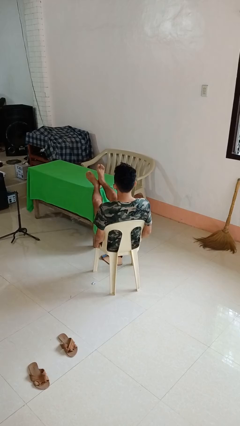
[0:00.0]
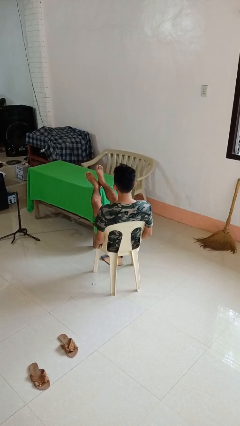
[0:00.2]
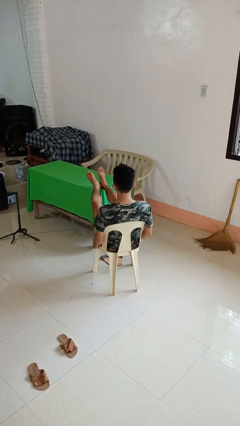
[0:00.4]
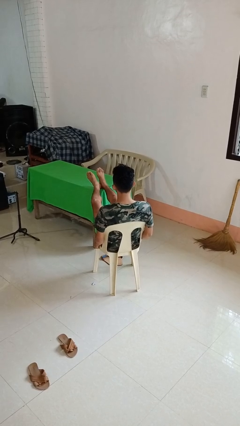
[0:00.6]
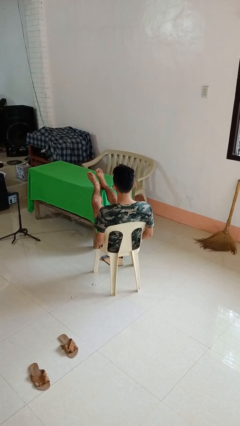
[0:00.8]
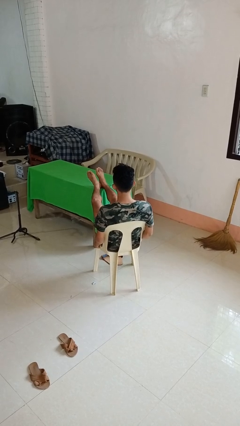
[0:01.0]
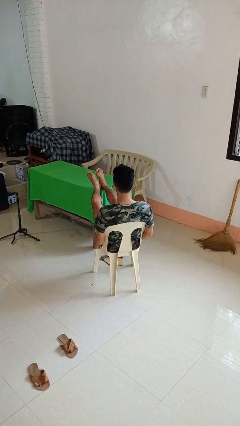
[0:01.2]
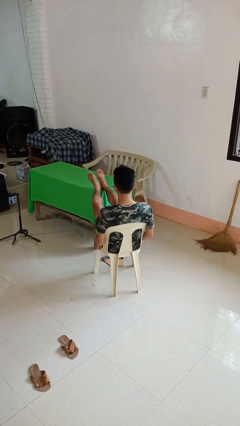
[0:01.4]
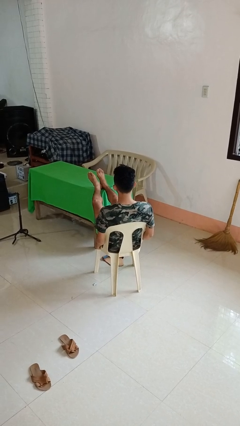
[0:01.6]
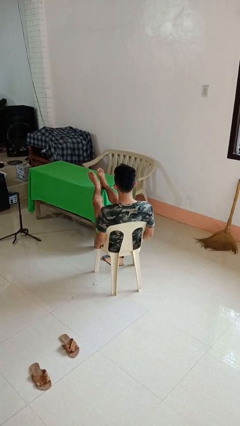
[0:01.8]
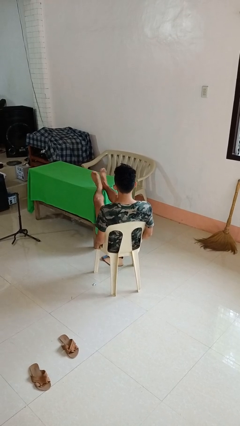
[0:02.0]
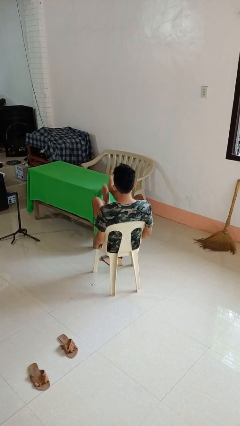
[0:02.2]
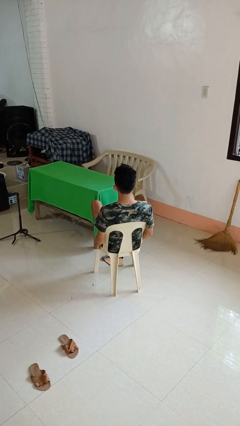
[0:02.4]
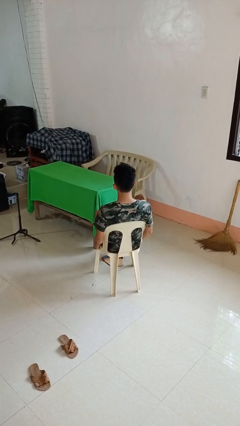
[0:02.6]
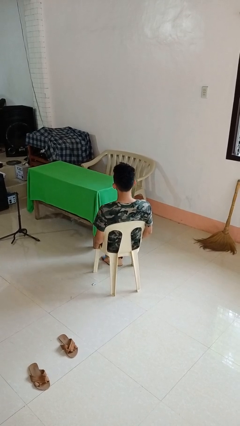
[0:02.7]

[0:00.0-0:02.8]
person puts feet up

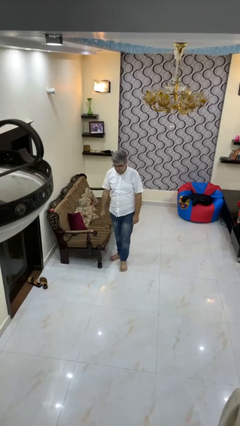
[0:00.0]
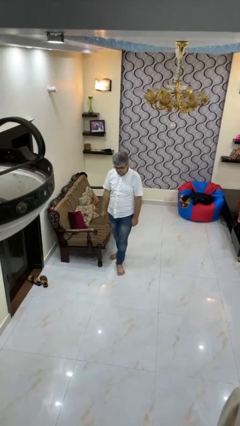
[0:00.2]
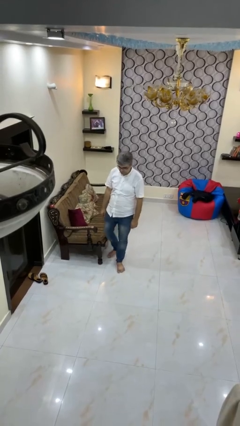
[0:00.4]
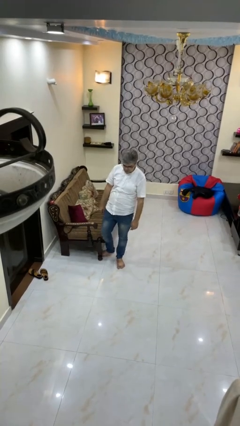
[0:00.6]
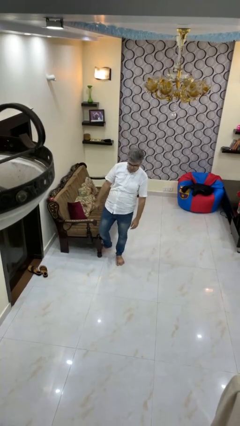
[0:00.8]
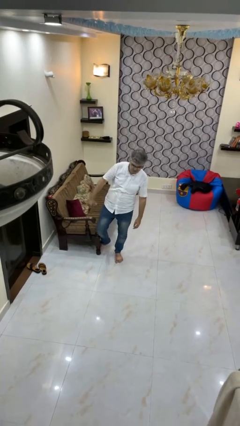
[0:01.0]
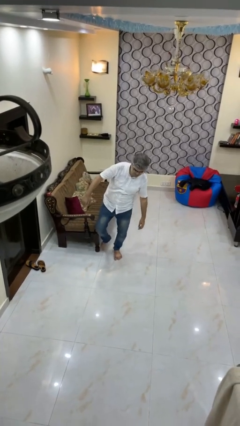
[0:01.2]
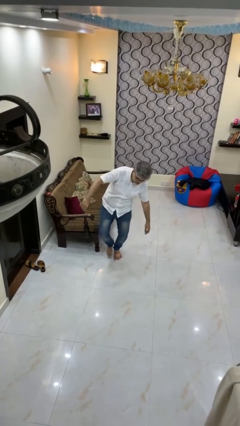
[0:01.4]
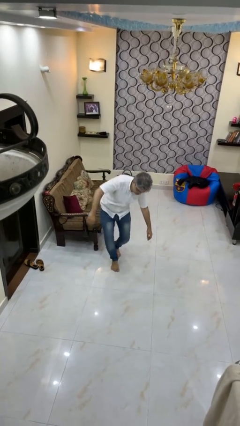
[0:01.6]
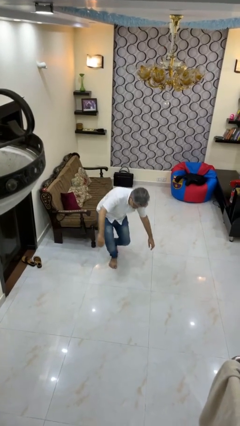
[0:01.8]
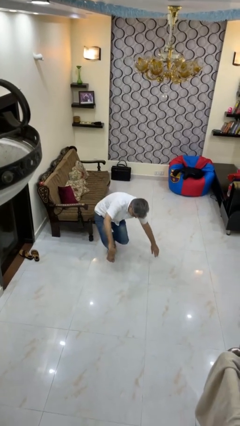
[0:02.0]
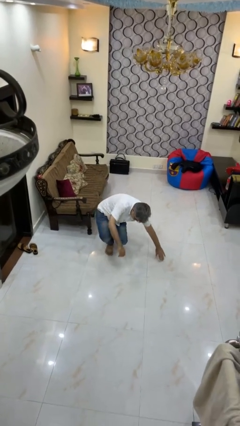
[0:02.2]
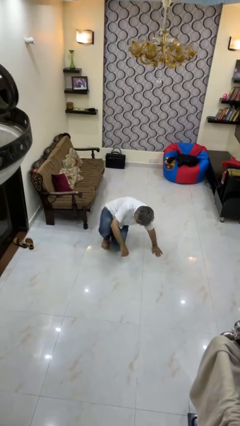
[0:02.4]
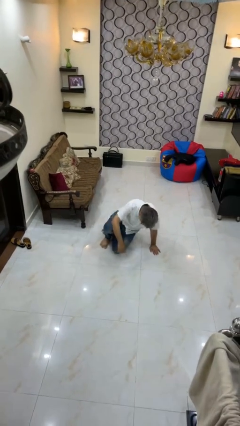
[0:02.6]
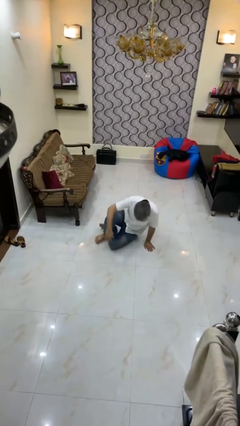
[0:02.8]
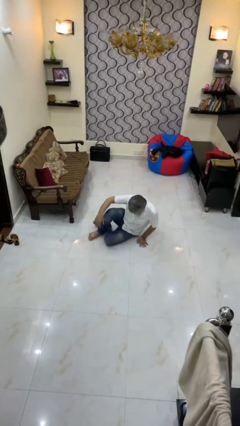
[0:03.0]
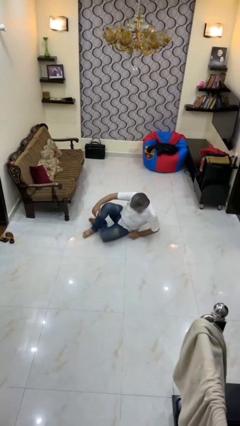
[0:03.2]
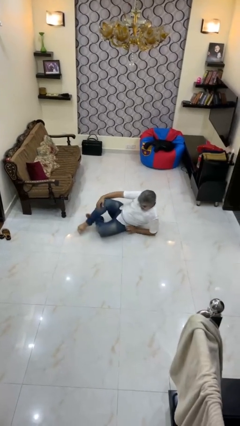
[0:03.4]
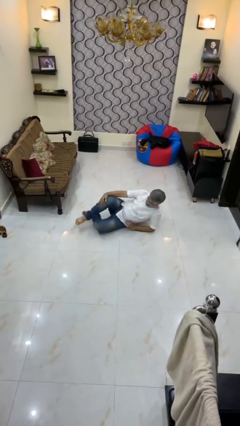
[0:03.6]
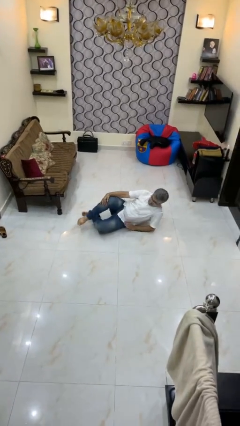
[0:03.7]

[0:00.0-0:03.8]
person trips on object on floor

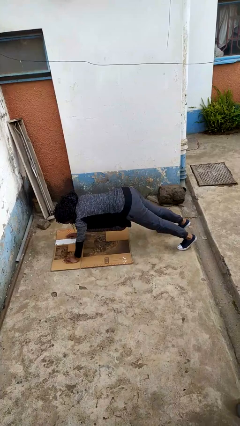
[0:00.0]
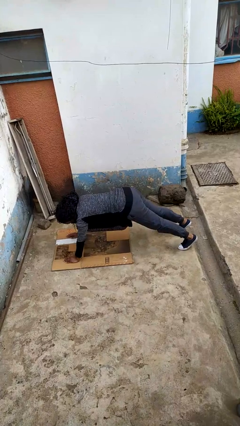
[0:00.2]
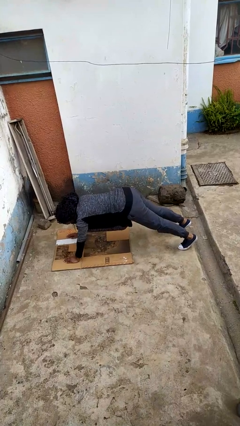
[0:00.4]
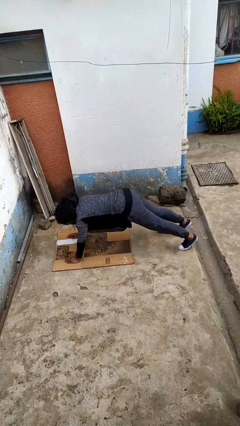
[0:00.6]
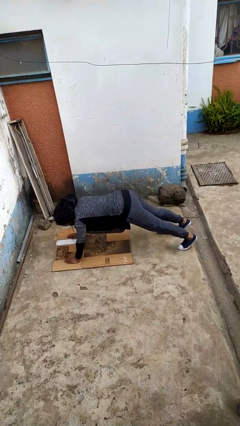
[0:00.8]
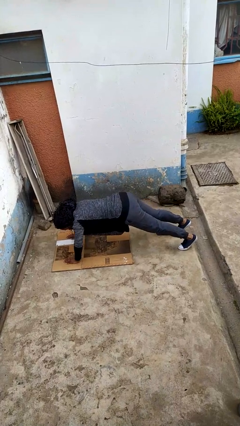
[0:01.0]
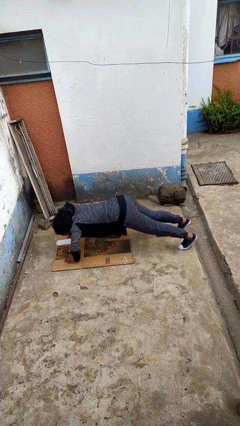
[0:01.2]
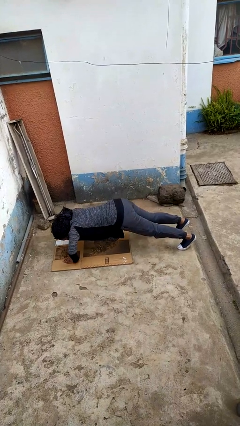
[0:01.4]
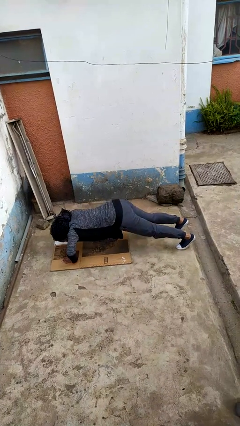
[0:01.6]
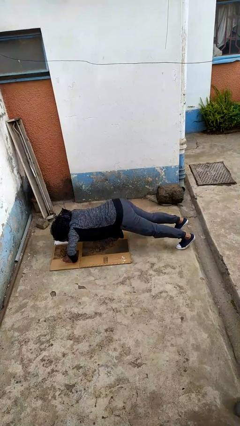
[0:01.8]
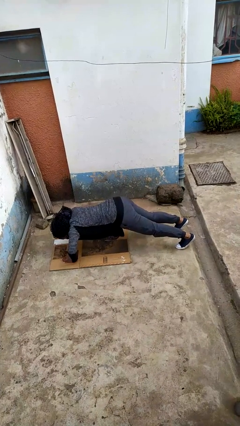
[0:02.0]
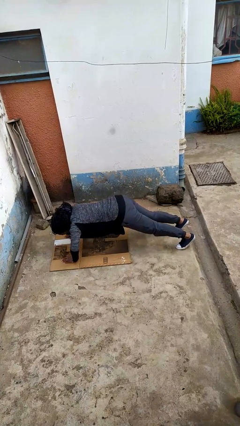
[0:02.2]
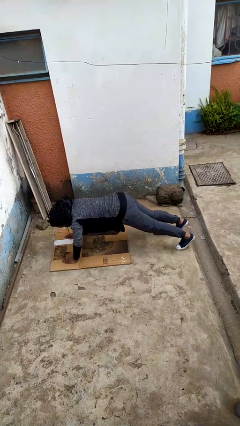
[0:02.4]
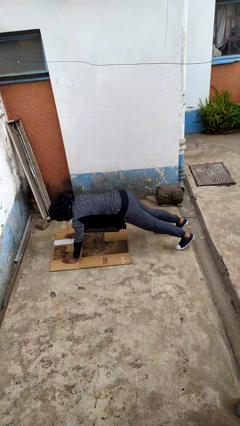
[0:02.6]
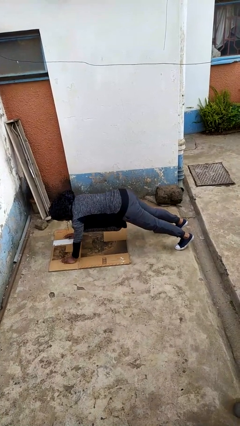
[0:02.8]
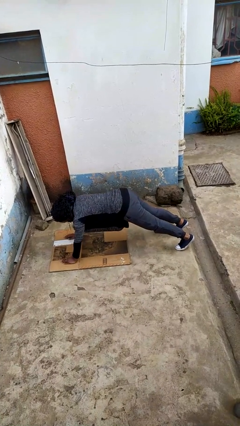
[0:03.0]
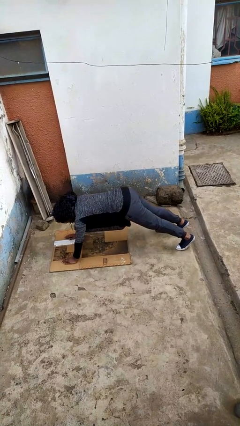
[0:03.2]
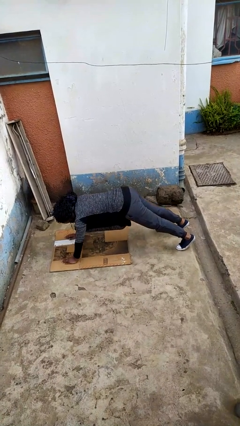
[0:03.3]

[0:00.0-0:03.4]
person exercises with pushup

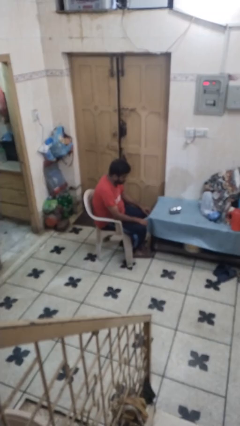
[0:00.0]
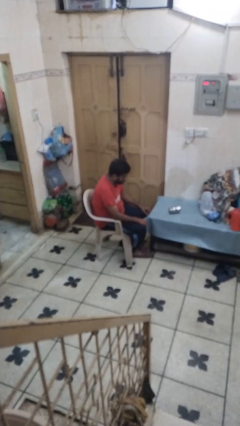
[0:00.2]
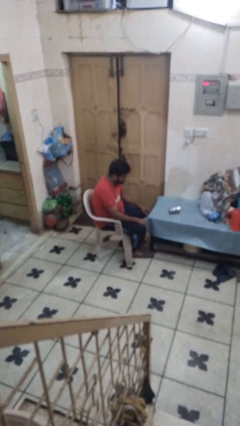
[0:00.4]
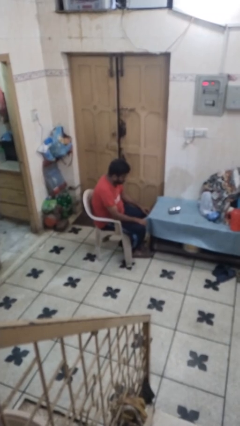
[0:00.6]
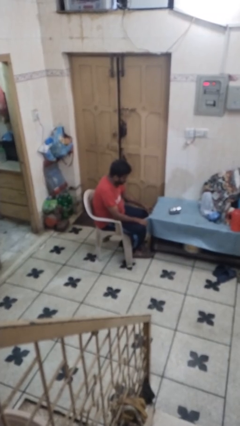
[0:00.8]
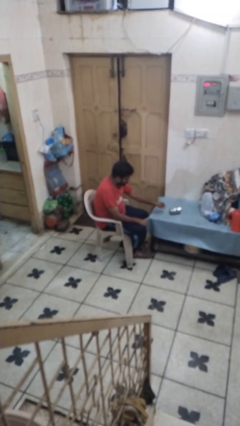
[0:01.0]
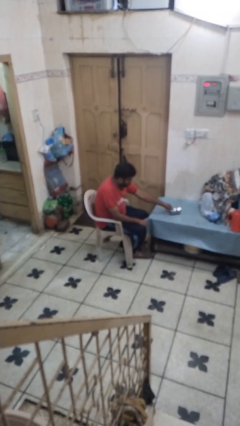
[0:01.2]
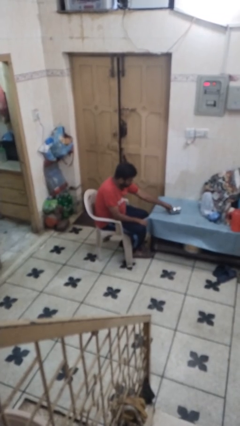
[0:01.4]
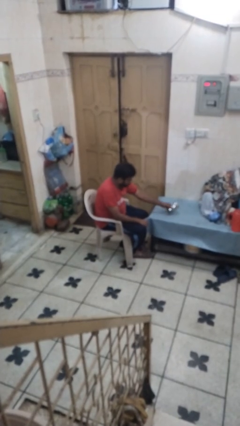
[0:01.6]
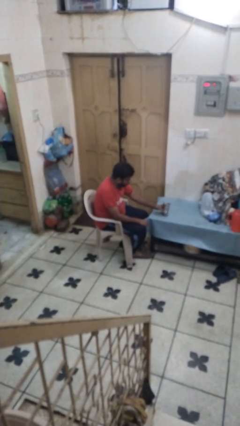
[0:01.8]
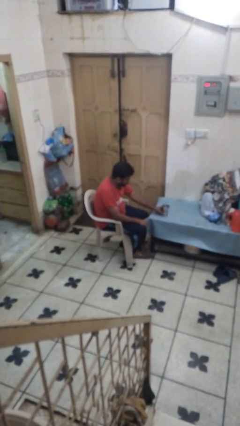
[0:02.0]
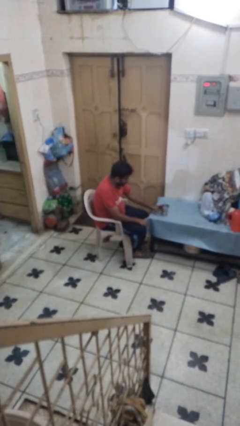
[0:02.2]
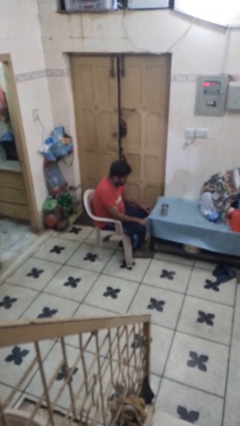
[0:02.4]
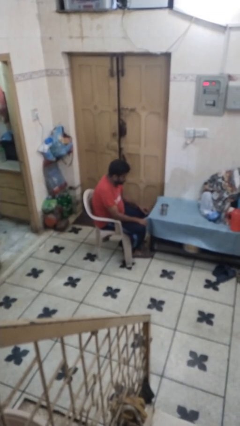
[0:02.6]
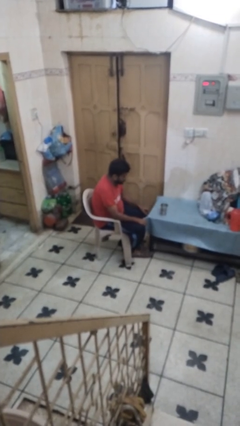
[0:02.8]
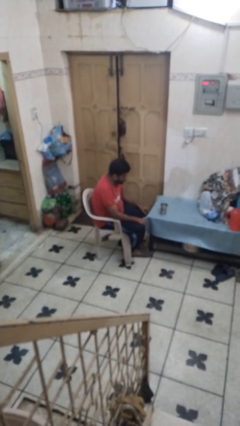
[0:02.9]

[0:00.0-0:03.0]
person sets upright glass

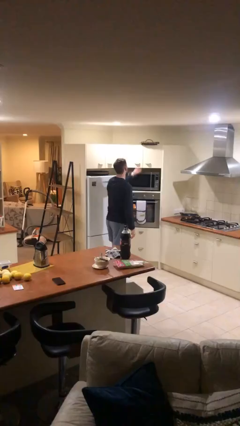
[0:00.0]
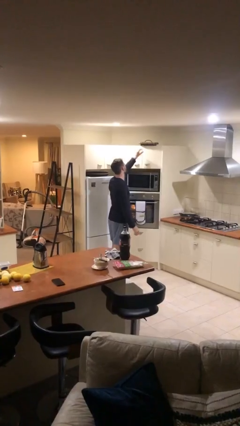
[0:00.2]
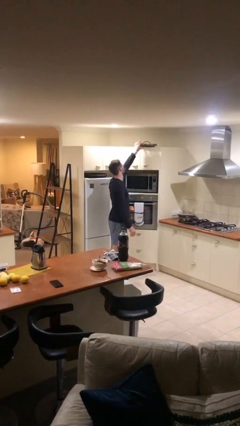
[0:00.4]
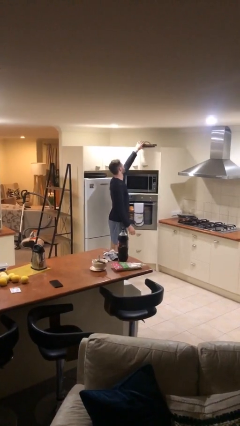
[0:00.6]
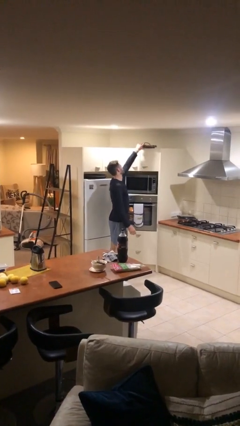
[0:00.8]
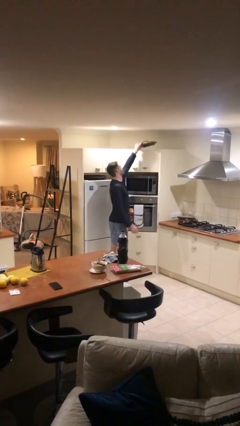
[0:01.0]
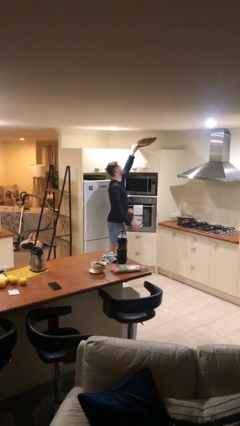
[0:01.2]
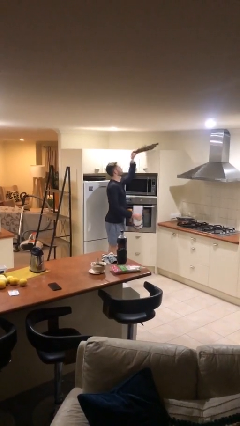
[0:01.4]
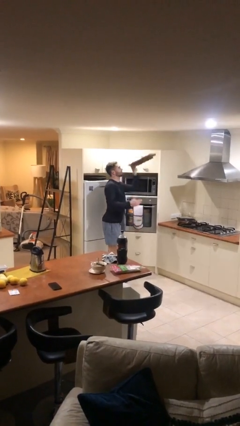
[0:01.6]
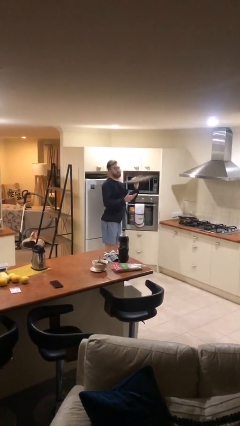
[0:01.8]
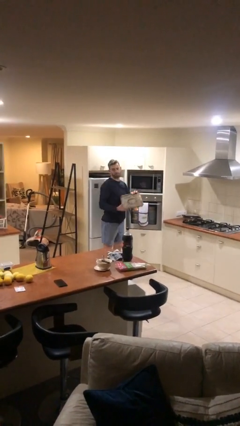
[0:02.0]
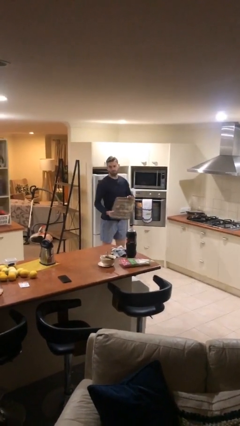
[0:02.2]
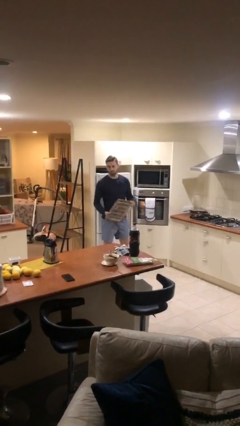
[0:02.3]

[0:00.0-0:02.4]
person picks up object from shelf

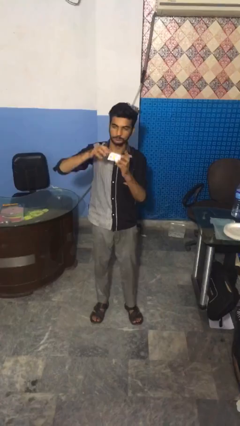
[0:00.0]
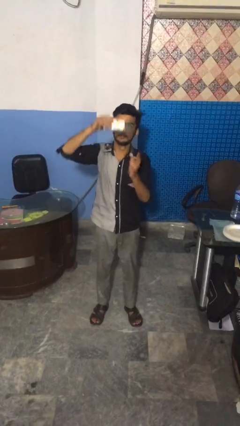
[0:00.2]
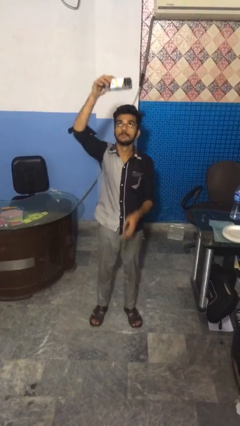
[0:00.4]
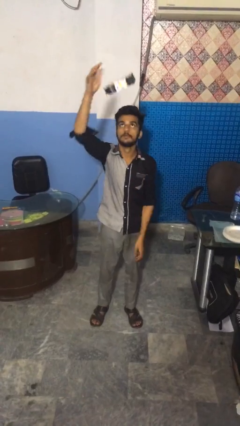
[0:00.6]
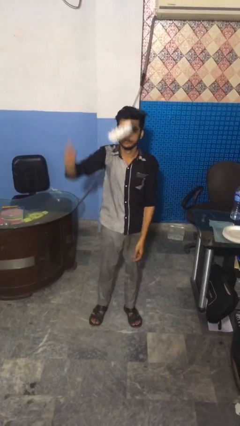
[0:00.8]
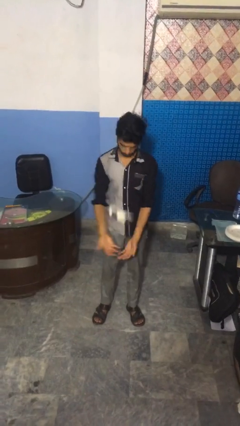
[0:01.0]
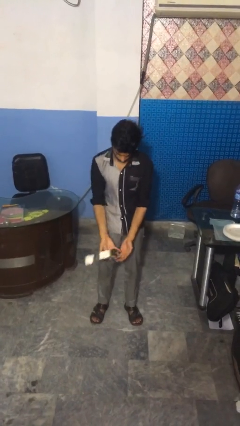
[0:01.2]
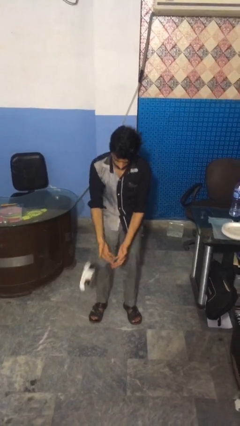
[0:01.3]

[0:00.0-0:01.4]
person drops object

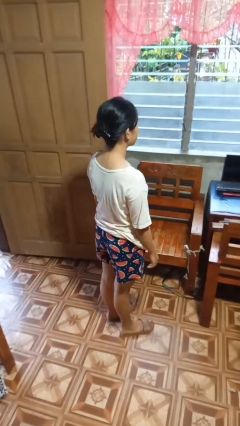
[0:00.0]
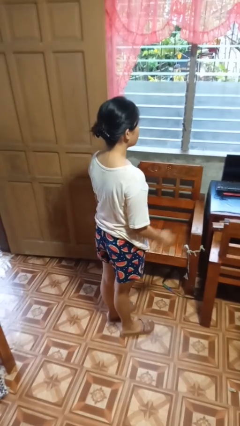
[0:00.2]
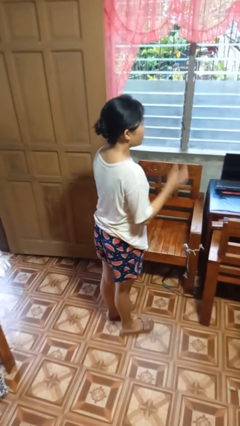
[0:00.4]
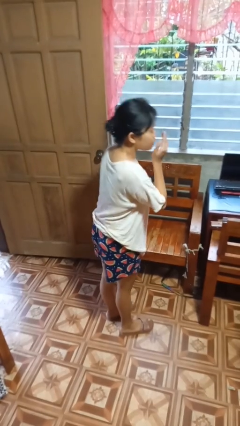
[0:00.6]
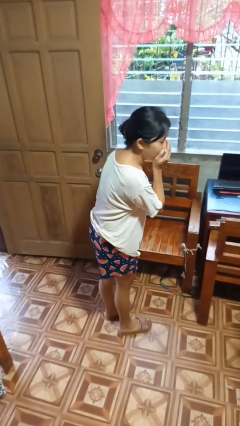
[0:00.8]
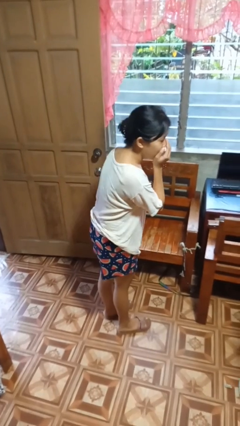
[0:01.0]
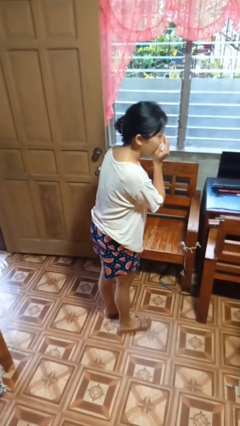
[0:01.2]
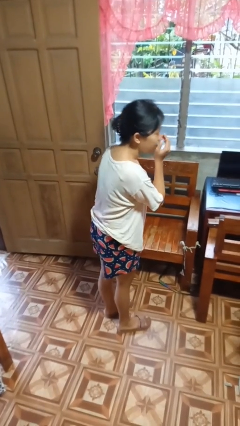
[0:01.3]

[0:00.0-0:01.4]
person sneezes into hand
